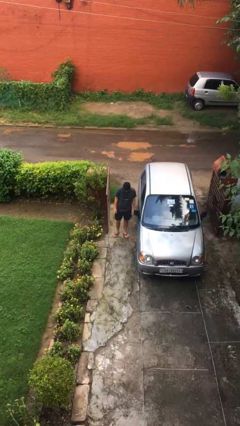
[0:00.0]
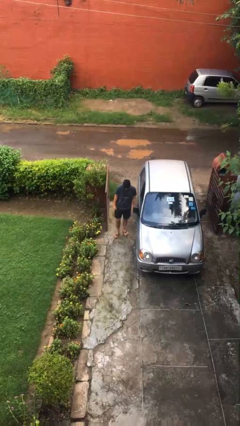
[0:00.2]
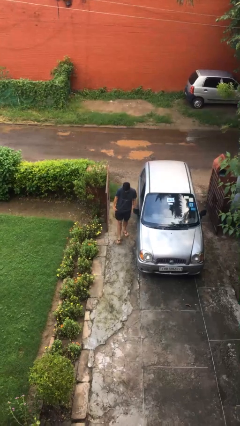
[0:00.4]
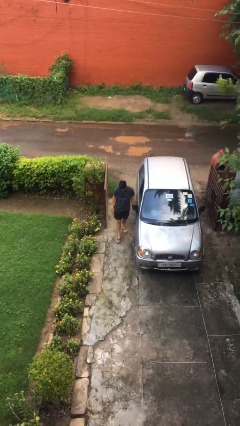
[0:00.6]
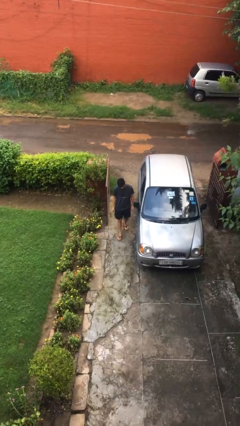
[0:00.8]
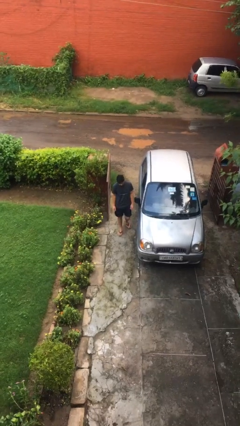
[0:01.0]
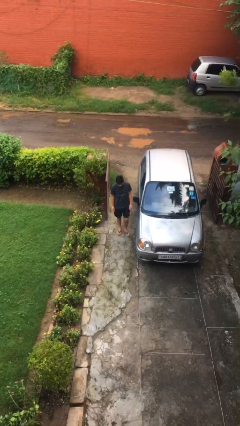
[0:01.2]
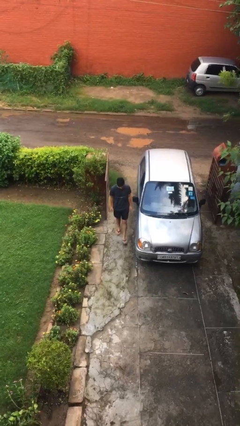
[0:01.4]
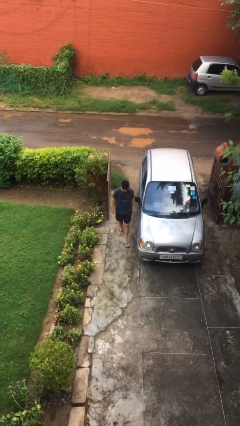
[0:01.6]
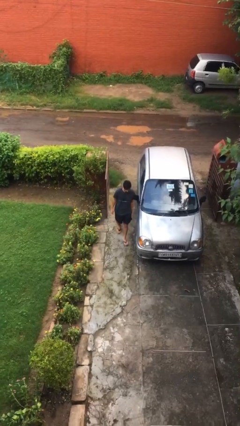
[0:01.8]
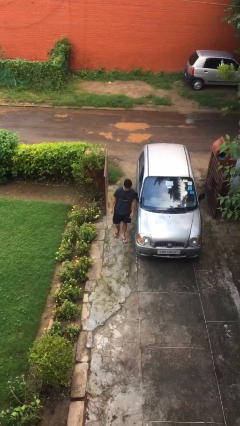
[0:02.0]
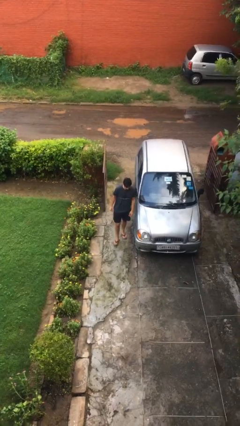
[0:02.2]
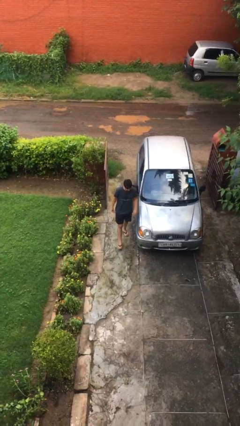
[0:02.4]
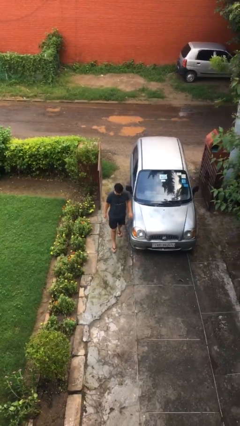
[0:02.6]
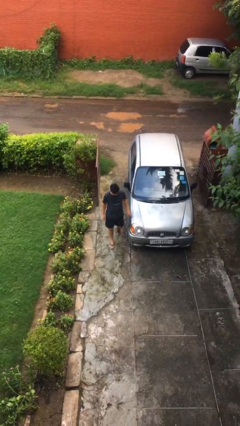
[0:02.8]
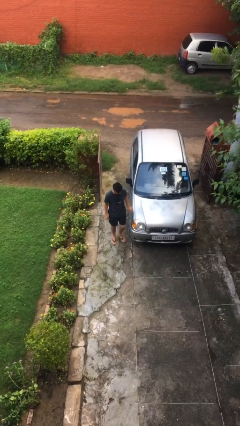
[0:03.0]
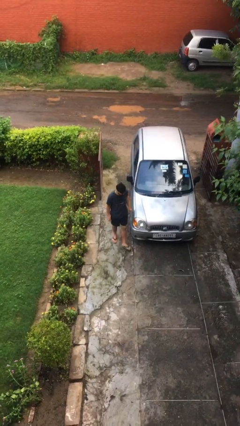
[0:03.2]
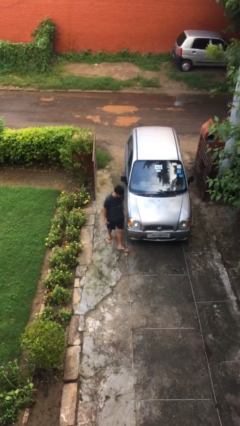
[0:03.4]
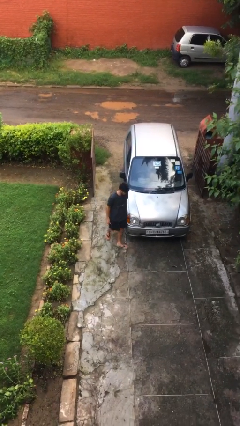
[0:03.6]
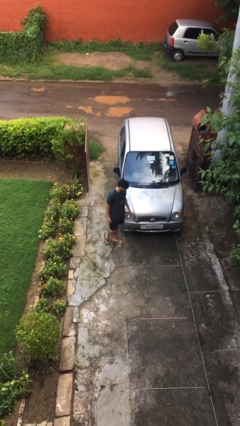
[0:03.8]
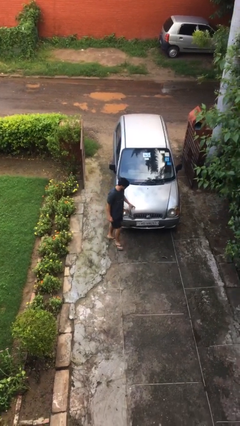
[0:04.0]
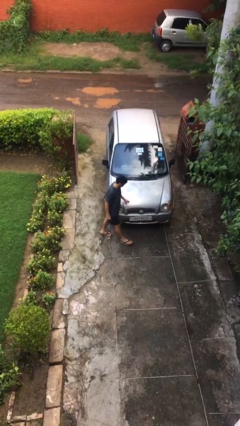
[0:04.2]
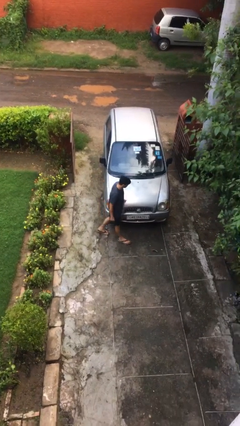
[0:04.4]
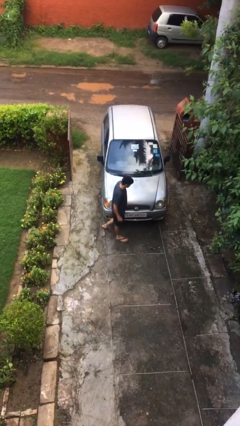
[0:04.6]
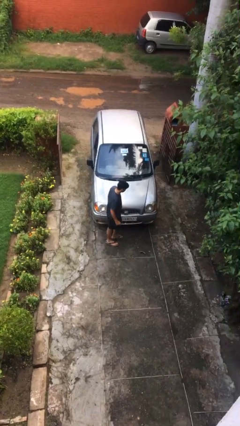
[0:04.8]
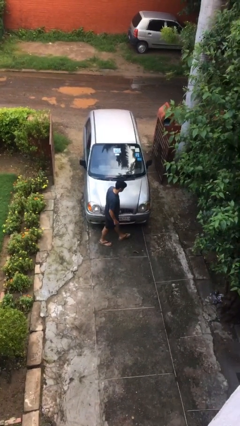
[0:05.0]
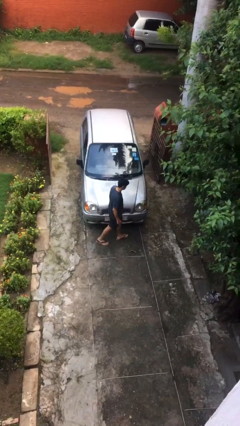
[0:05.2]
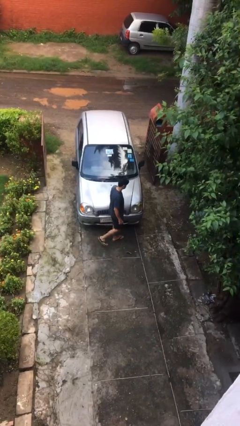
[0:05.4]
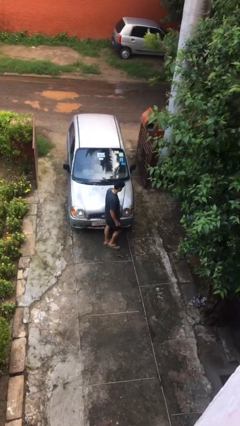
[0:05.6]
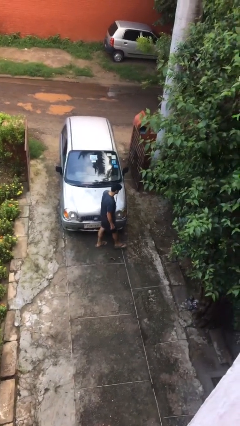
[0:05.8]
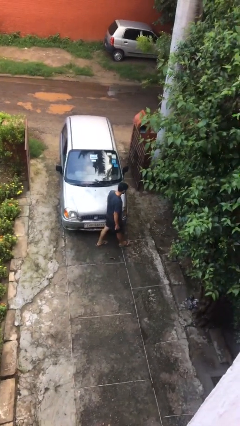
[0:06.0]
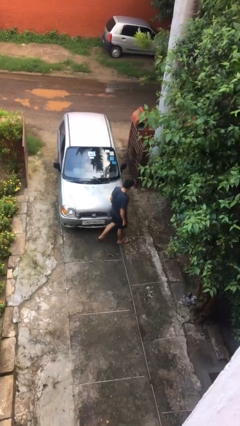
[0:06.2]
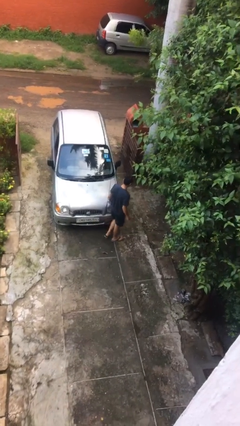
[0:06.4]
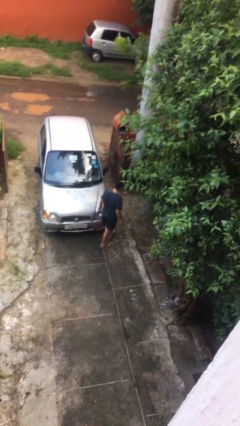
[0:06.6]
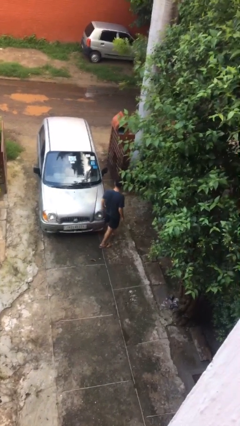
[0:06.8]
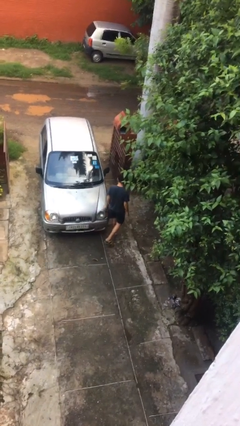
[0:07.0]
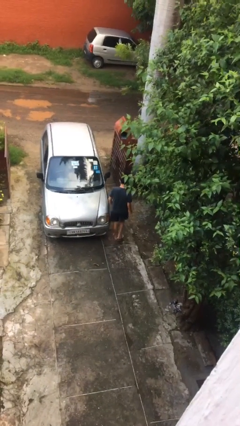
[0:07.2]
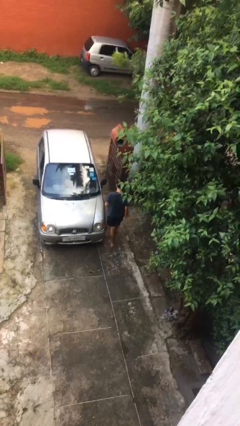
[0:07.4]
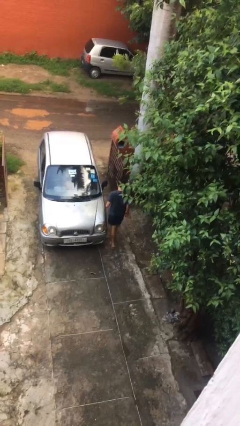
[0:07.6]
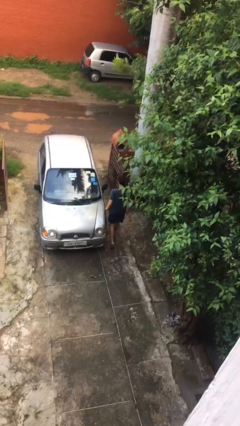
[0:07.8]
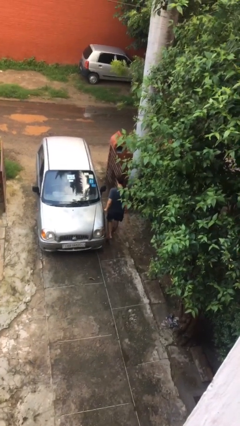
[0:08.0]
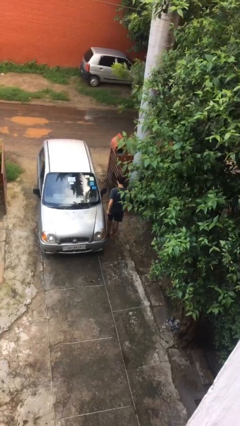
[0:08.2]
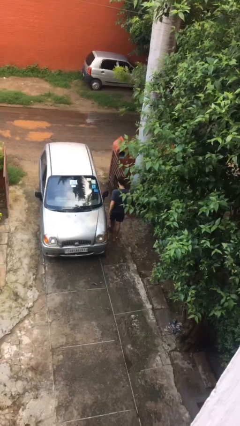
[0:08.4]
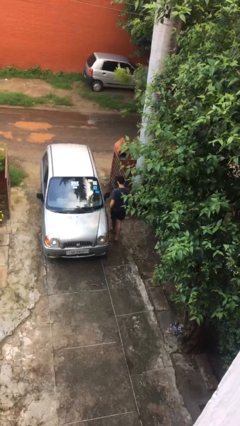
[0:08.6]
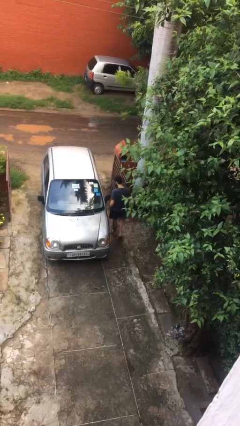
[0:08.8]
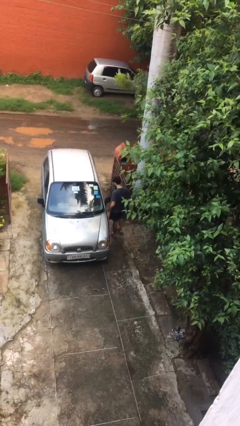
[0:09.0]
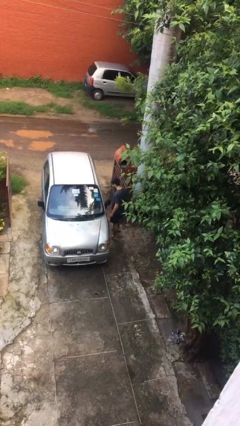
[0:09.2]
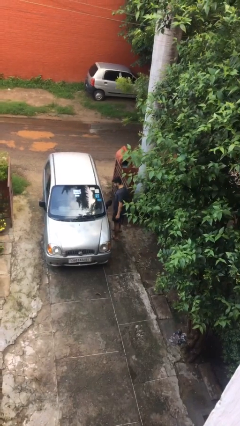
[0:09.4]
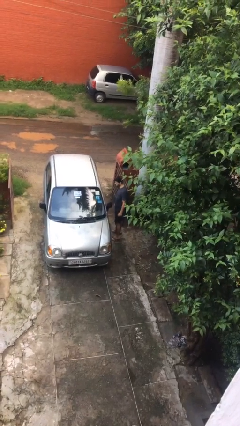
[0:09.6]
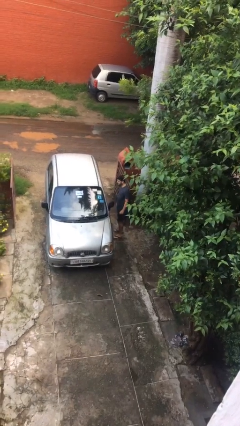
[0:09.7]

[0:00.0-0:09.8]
person walks around car

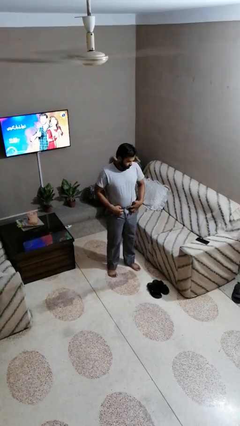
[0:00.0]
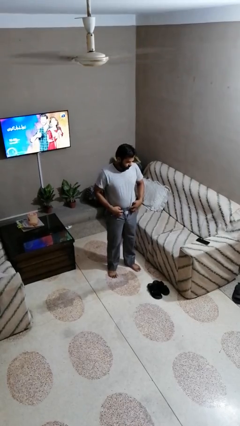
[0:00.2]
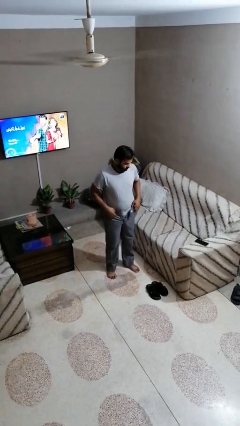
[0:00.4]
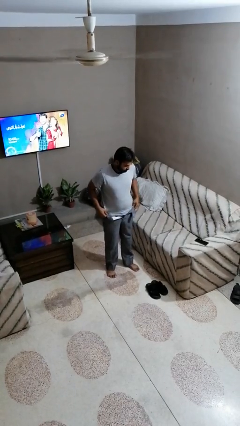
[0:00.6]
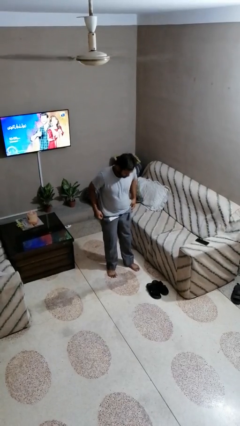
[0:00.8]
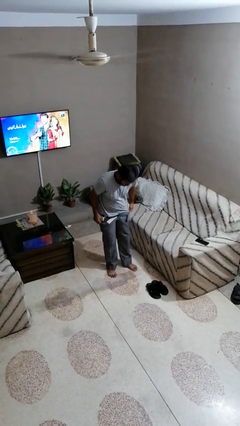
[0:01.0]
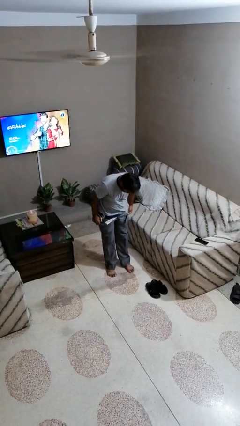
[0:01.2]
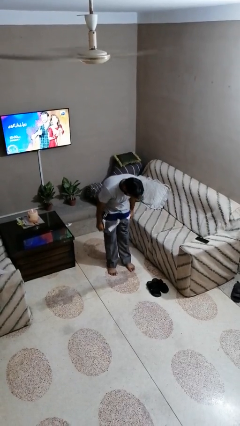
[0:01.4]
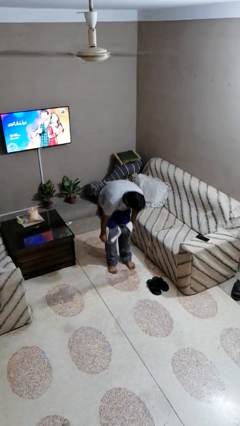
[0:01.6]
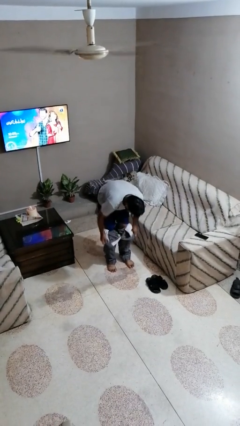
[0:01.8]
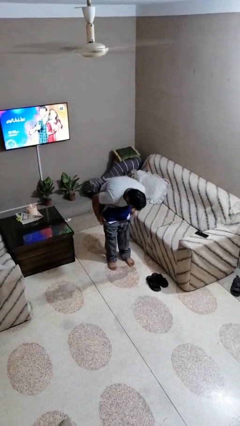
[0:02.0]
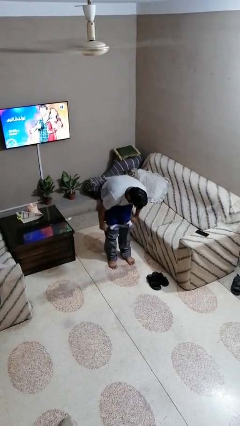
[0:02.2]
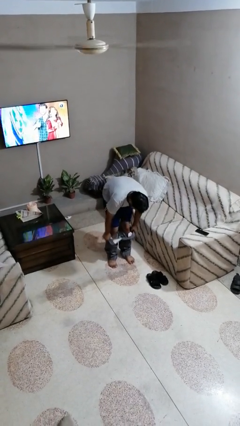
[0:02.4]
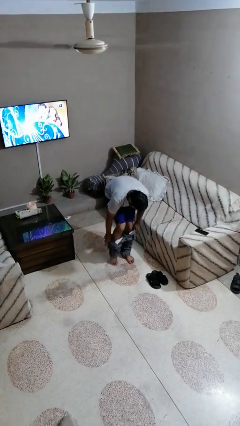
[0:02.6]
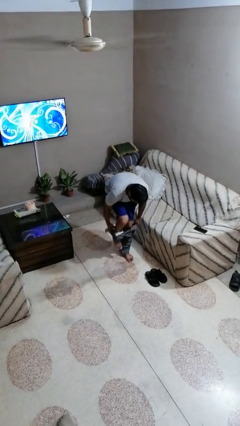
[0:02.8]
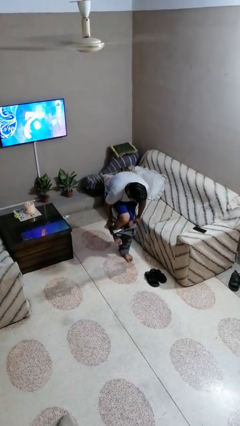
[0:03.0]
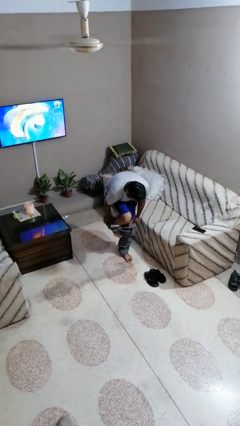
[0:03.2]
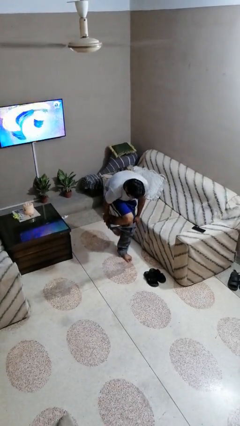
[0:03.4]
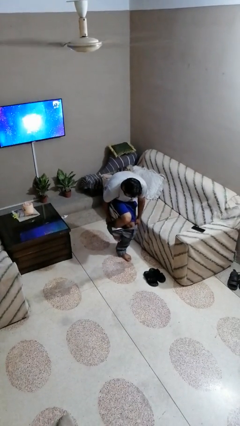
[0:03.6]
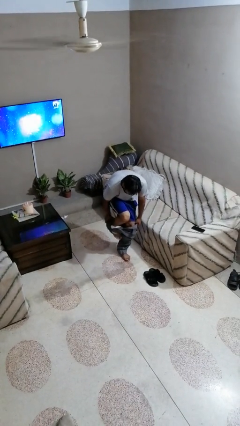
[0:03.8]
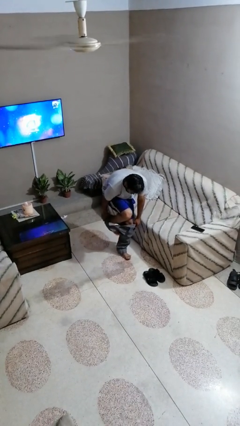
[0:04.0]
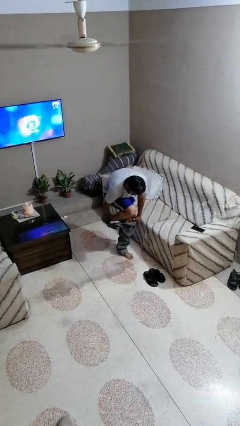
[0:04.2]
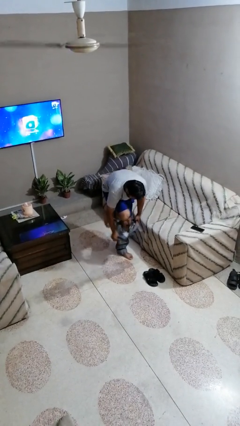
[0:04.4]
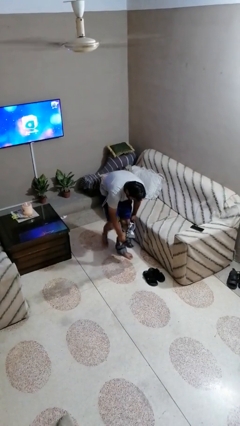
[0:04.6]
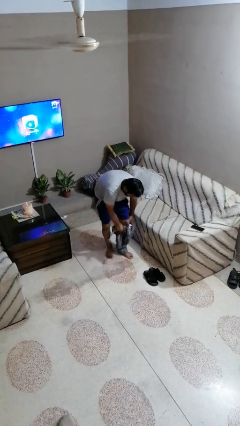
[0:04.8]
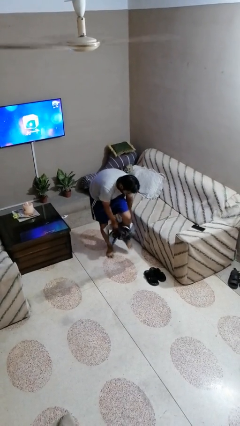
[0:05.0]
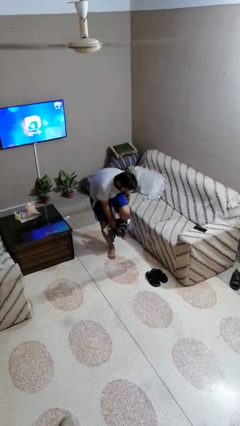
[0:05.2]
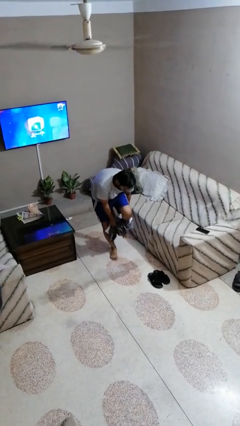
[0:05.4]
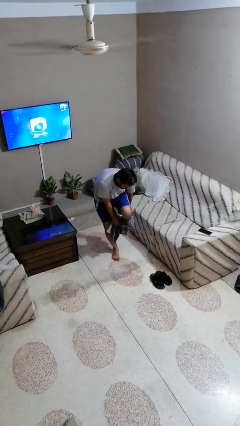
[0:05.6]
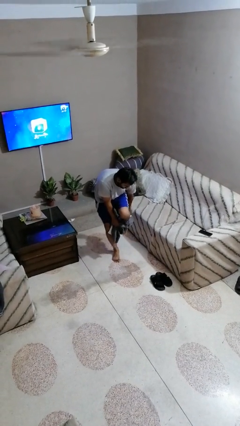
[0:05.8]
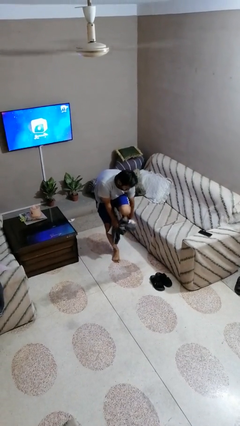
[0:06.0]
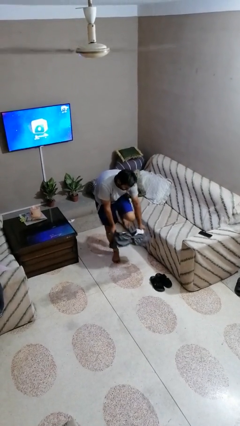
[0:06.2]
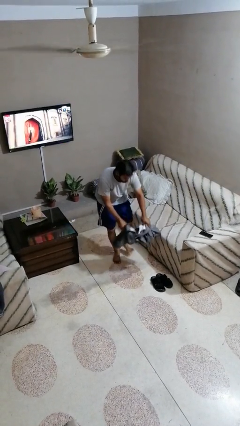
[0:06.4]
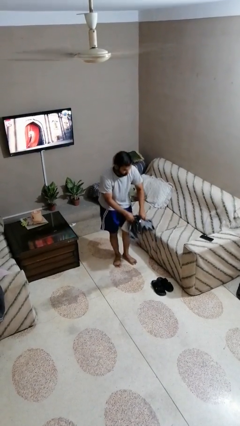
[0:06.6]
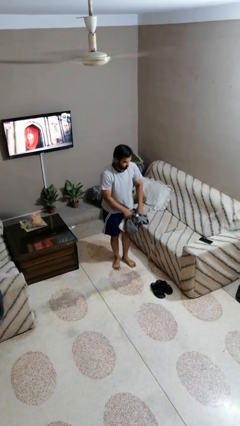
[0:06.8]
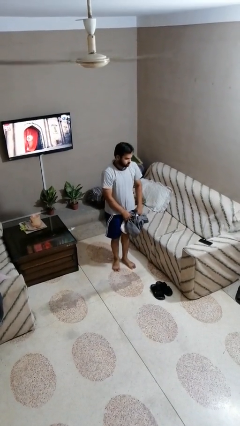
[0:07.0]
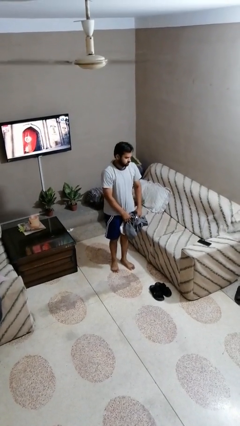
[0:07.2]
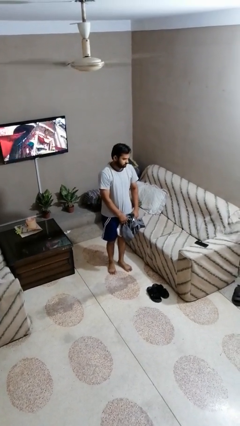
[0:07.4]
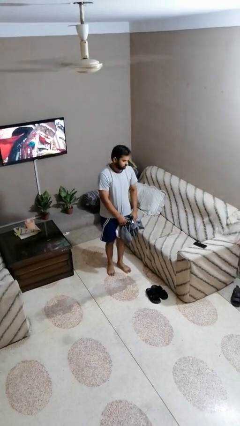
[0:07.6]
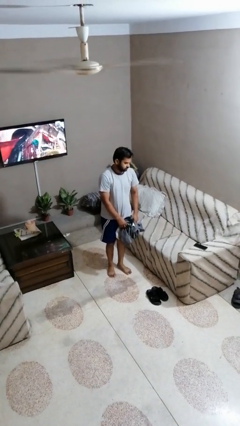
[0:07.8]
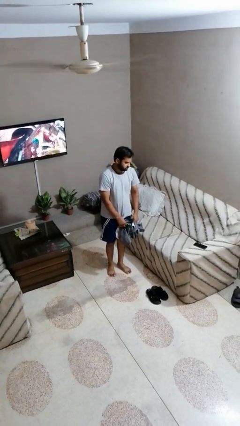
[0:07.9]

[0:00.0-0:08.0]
person takes off pants
